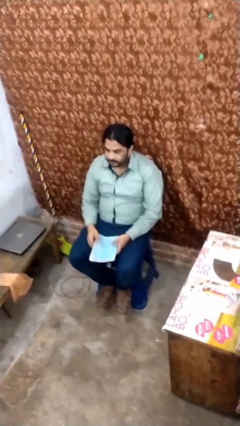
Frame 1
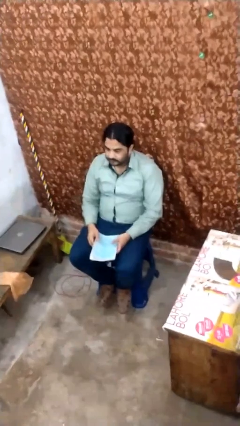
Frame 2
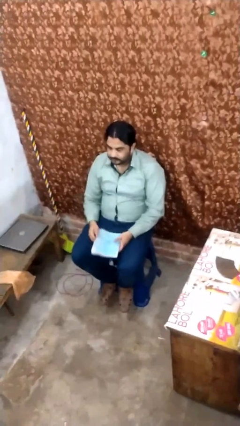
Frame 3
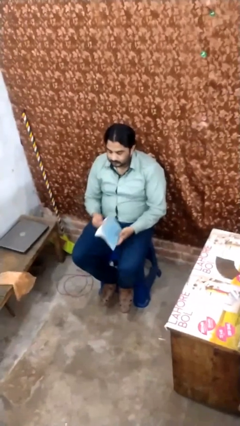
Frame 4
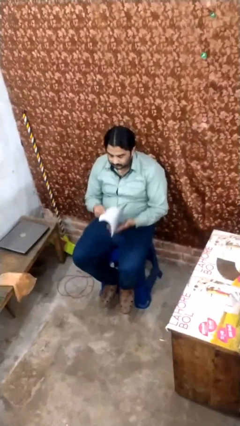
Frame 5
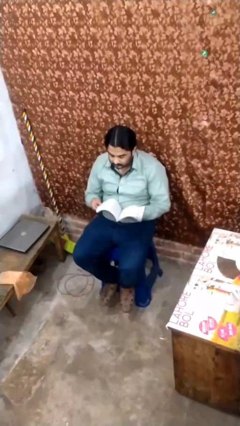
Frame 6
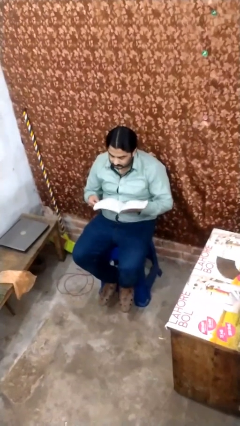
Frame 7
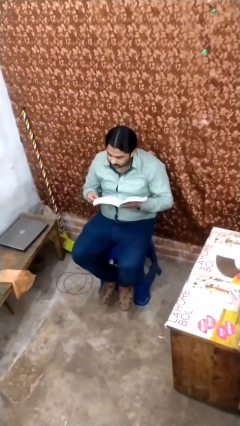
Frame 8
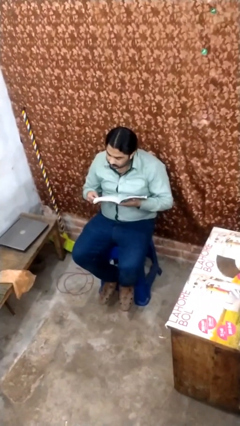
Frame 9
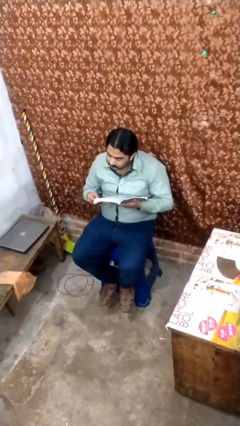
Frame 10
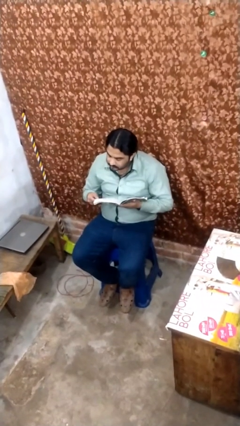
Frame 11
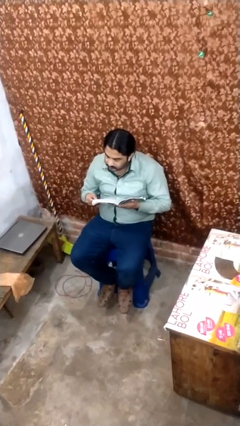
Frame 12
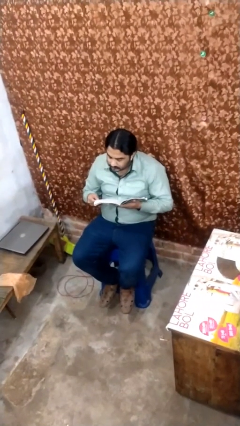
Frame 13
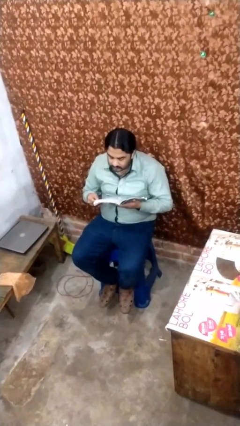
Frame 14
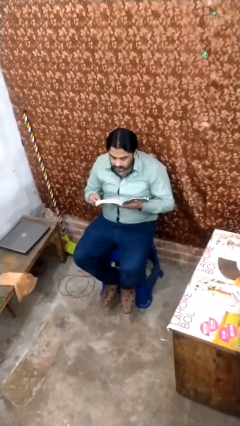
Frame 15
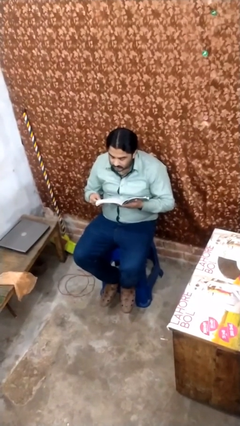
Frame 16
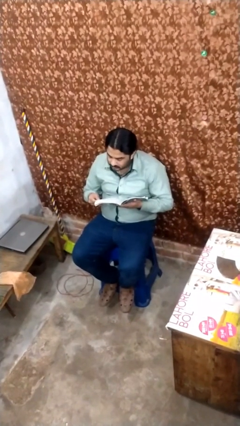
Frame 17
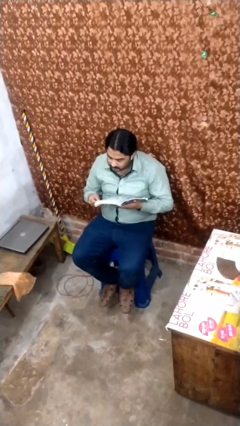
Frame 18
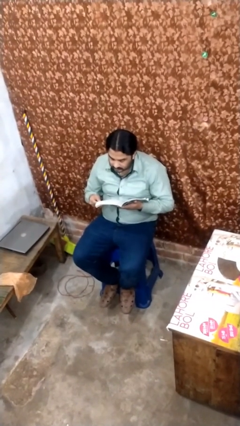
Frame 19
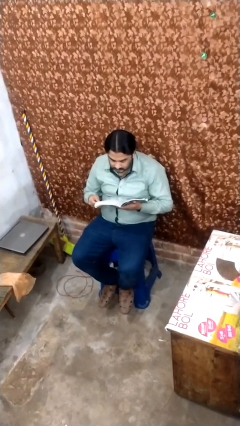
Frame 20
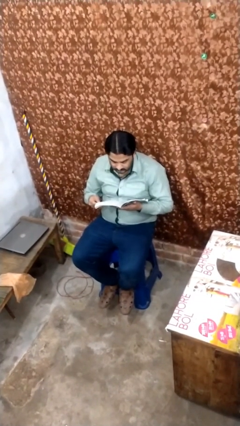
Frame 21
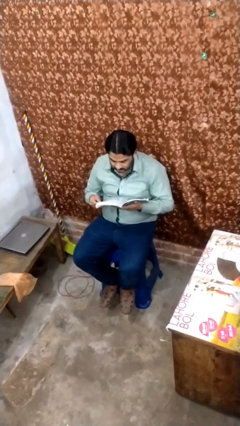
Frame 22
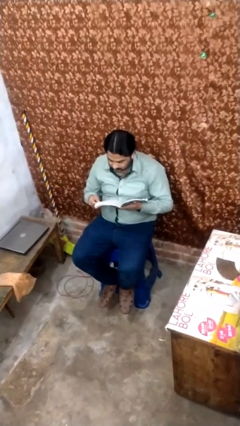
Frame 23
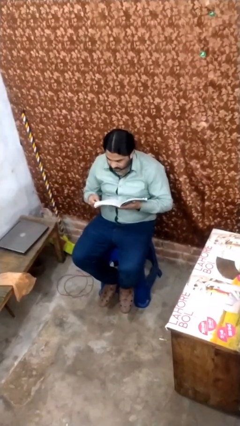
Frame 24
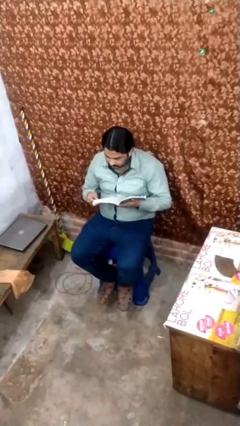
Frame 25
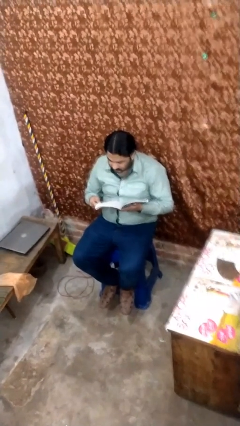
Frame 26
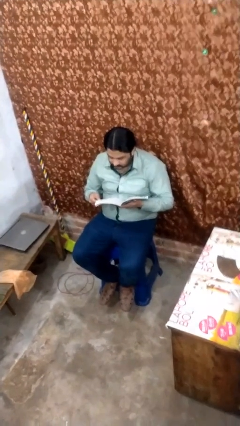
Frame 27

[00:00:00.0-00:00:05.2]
person reads document

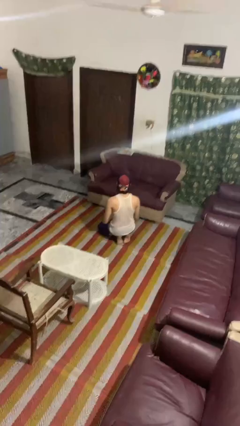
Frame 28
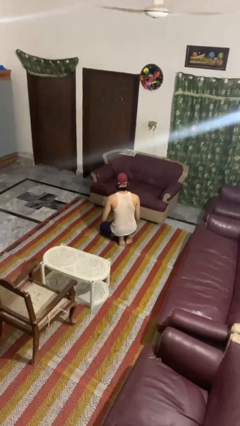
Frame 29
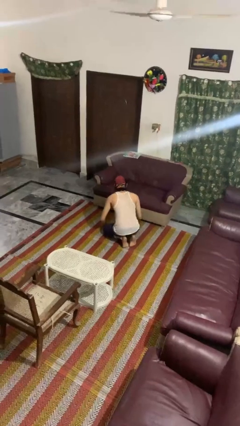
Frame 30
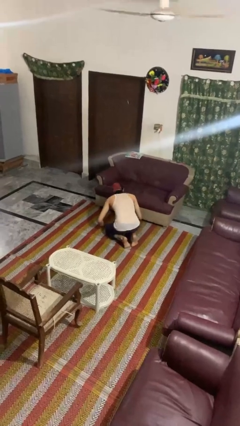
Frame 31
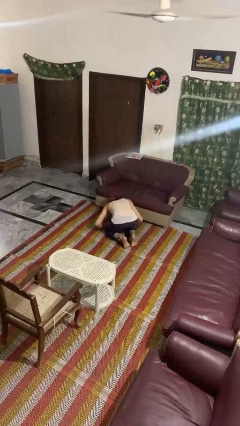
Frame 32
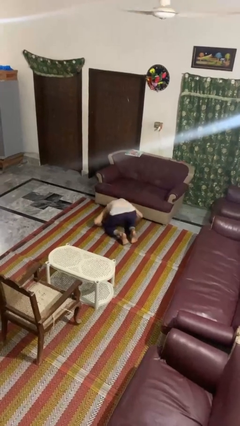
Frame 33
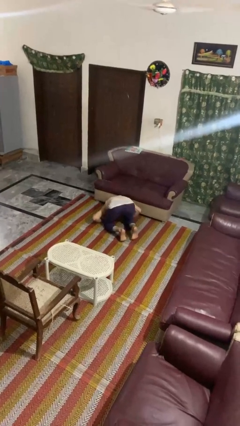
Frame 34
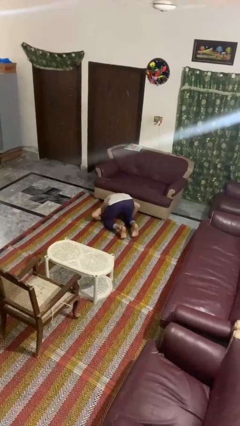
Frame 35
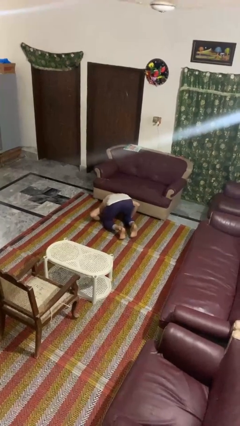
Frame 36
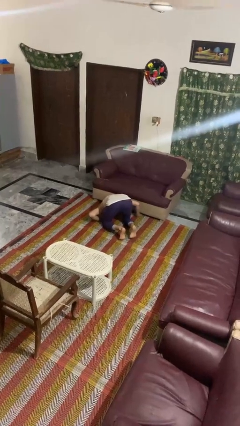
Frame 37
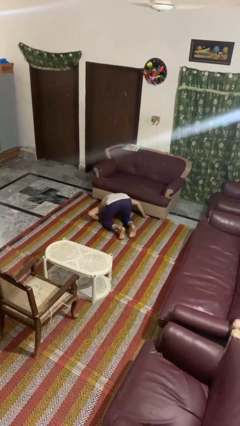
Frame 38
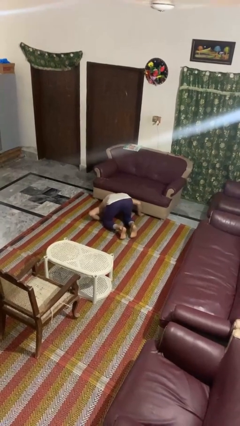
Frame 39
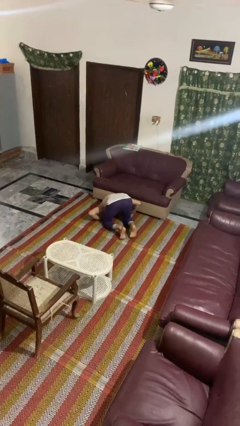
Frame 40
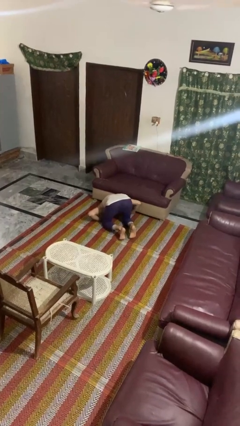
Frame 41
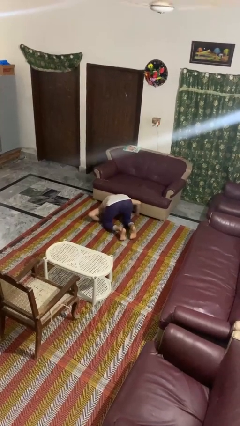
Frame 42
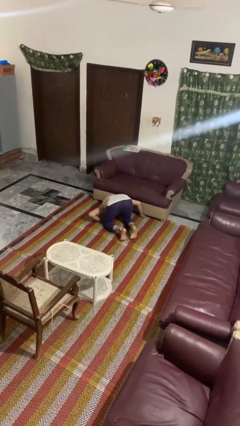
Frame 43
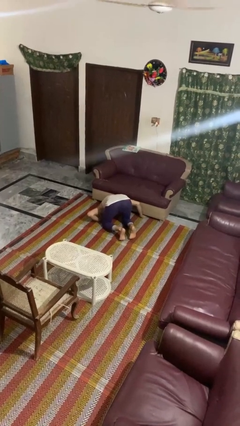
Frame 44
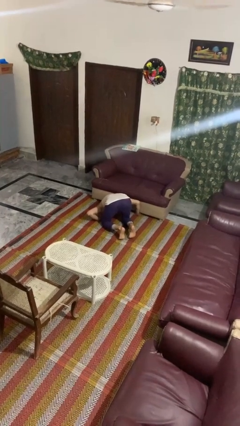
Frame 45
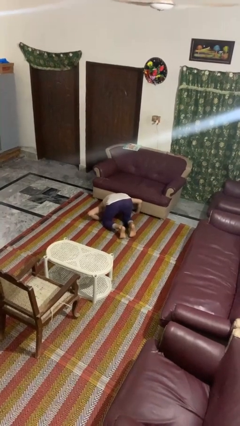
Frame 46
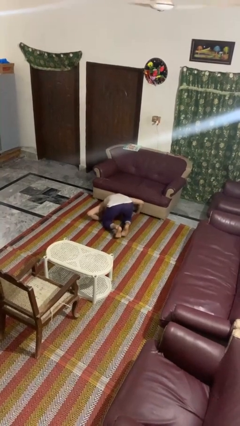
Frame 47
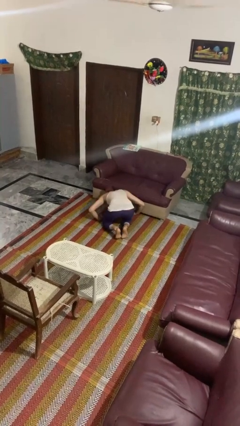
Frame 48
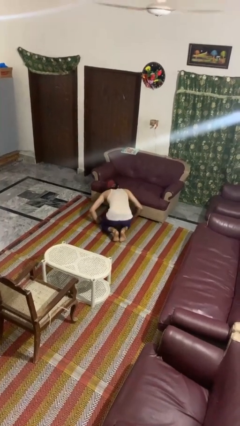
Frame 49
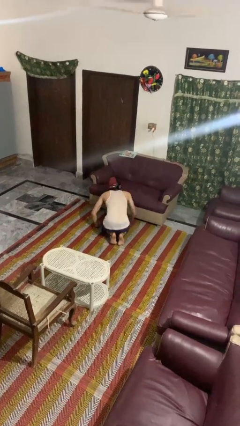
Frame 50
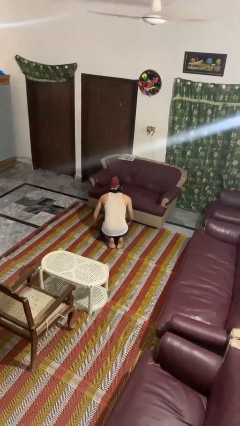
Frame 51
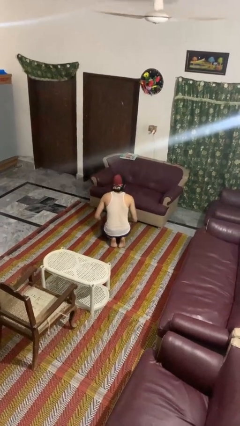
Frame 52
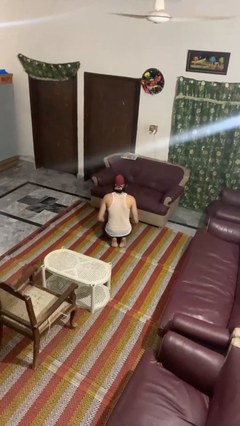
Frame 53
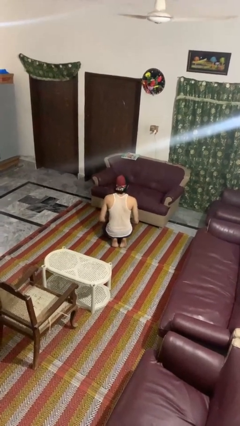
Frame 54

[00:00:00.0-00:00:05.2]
person searches under couch

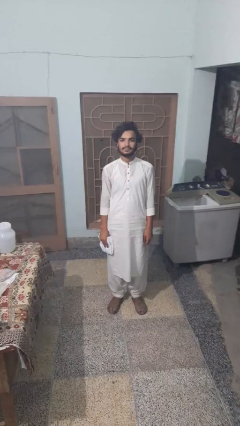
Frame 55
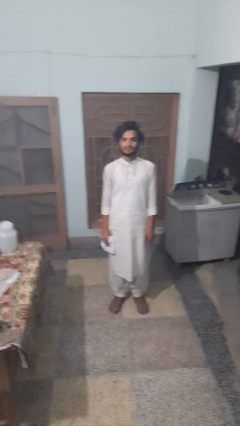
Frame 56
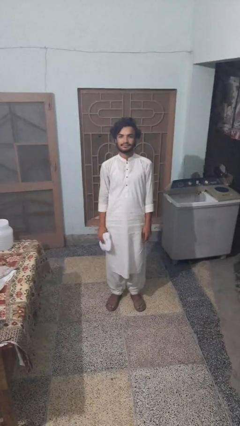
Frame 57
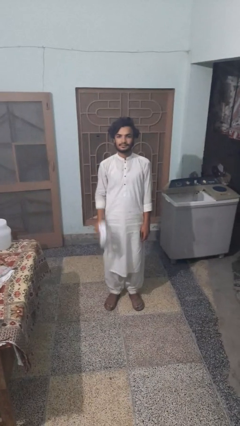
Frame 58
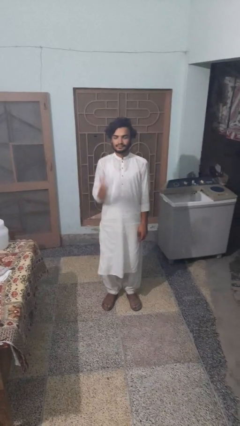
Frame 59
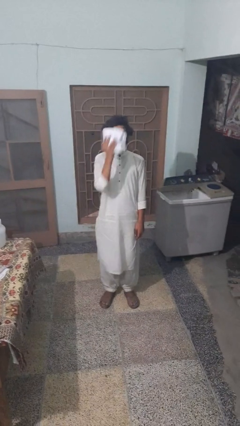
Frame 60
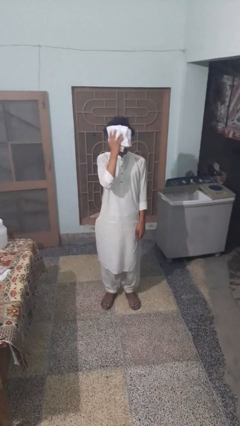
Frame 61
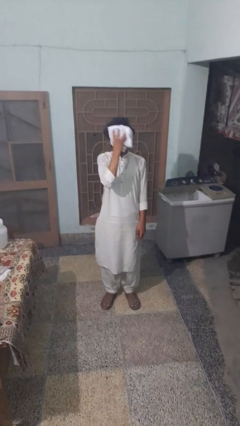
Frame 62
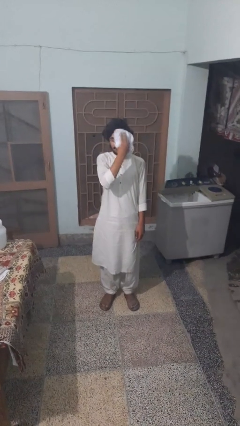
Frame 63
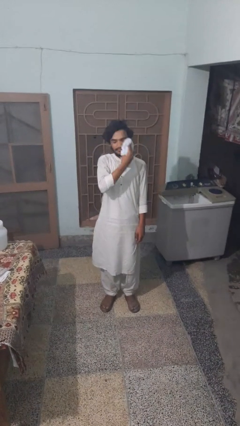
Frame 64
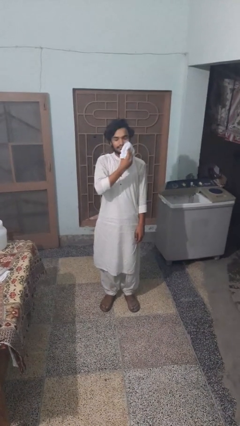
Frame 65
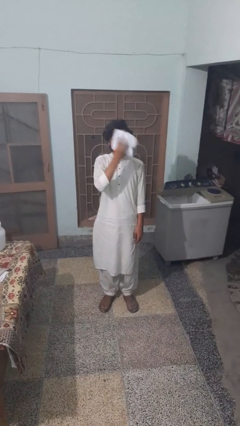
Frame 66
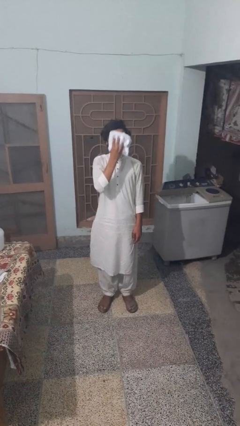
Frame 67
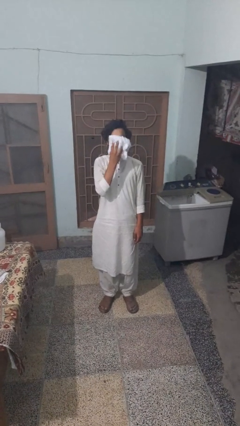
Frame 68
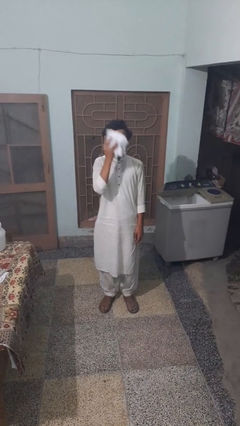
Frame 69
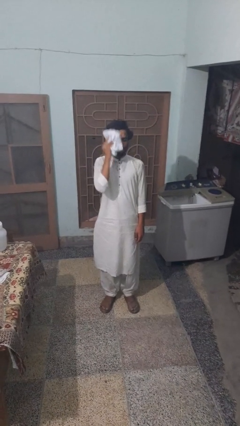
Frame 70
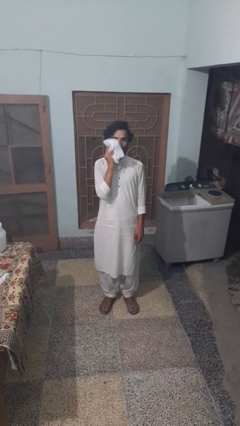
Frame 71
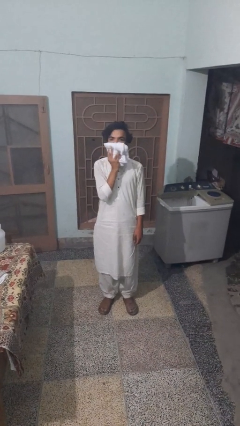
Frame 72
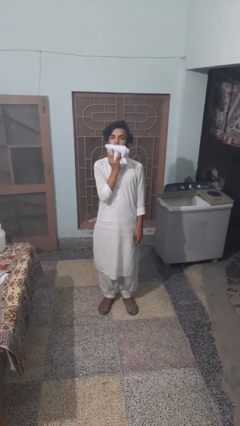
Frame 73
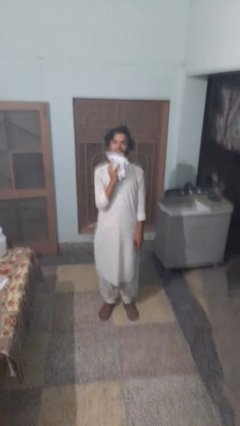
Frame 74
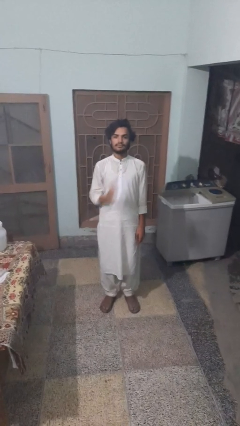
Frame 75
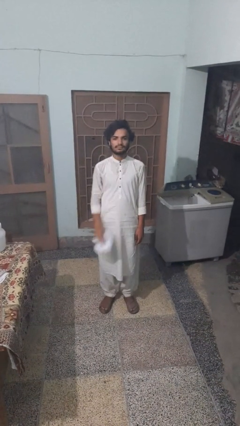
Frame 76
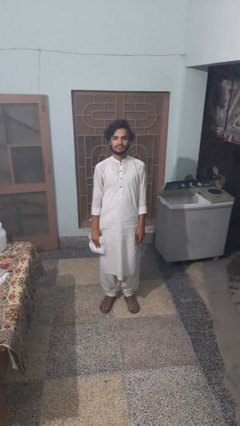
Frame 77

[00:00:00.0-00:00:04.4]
person wipes mouth with napkin

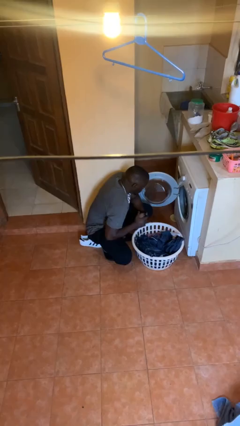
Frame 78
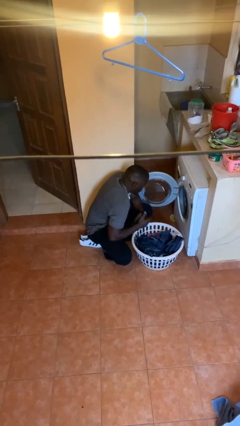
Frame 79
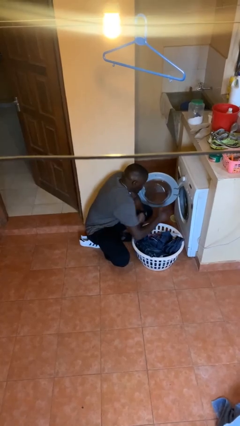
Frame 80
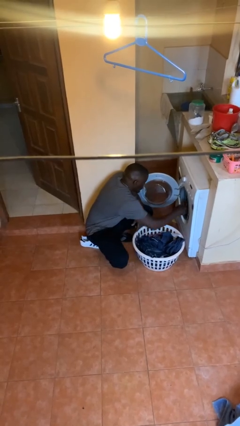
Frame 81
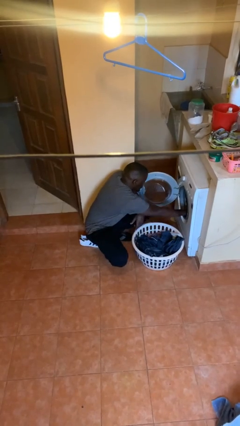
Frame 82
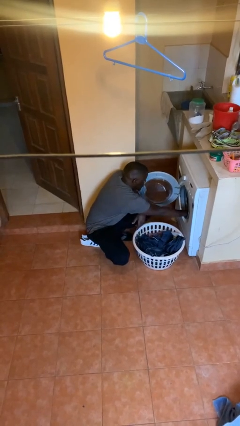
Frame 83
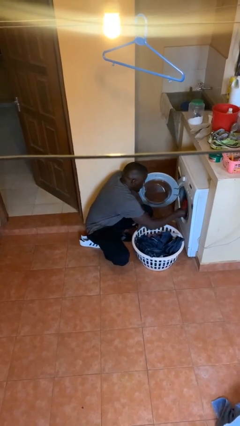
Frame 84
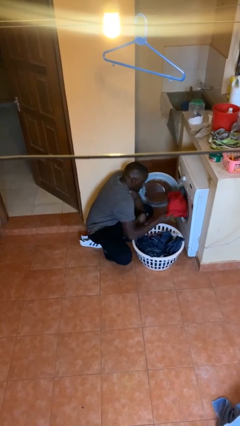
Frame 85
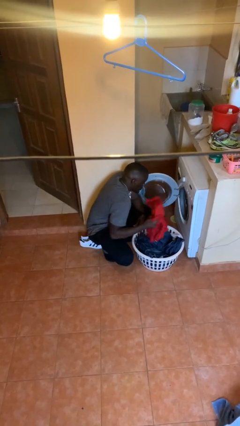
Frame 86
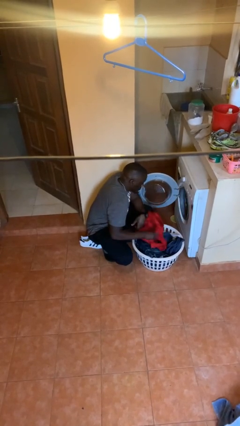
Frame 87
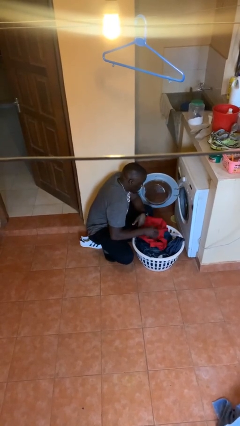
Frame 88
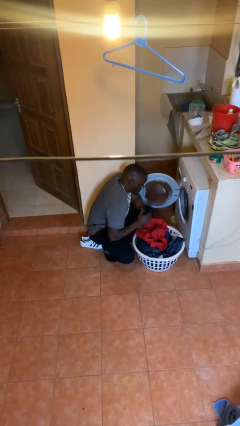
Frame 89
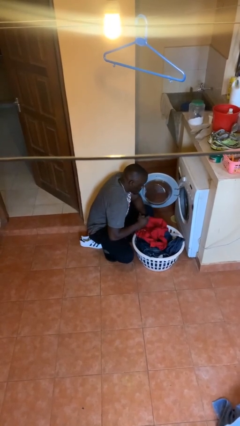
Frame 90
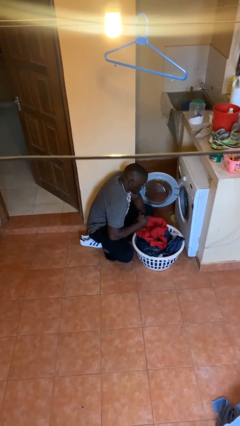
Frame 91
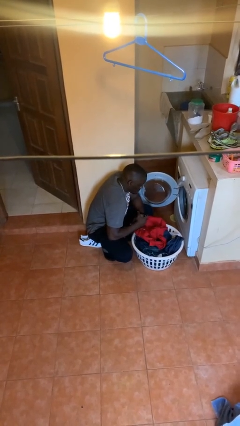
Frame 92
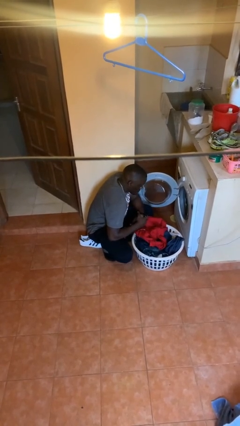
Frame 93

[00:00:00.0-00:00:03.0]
person unloads dryer
